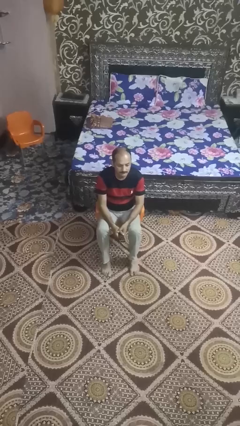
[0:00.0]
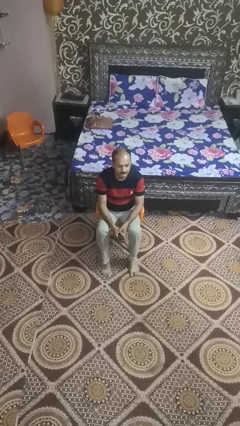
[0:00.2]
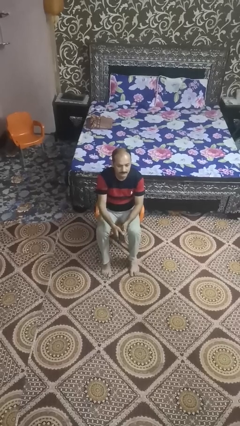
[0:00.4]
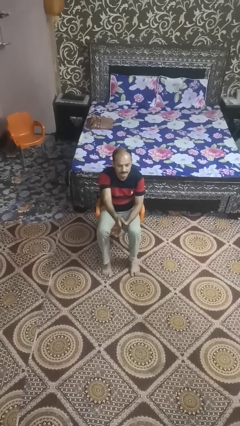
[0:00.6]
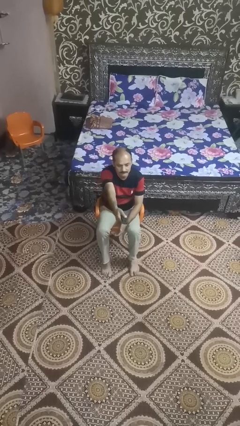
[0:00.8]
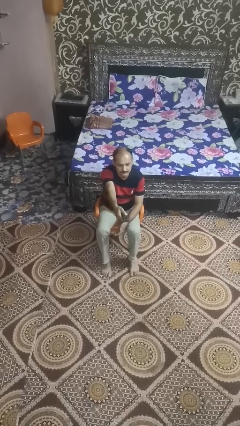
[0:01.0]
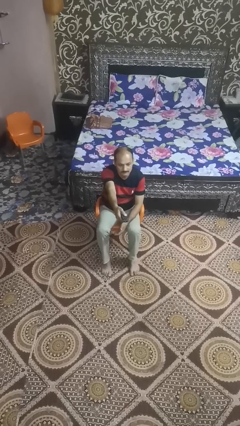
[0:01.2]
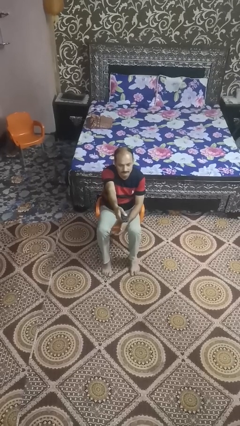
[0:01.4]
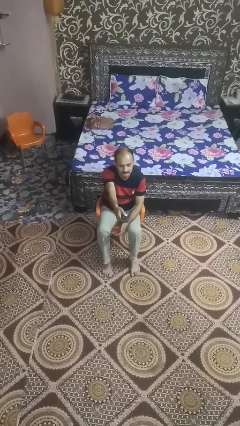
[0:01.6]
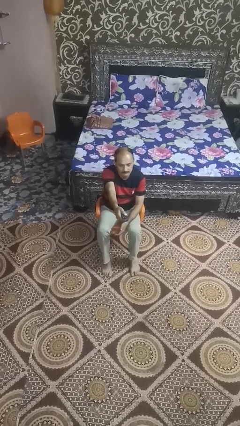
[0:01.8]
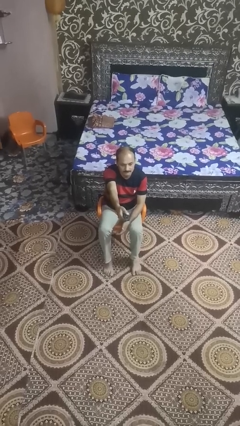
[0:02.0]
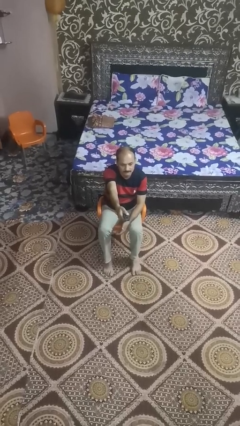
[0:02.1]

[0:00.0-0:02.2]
person uses television remote

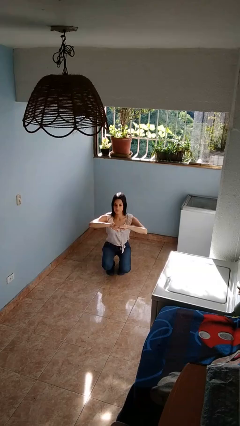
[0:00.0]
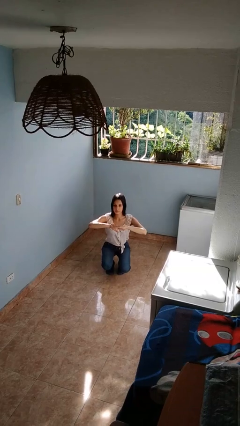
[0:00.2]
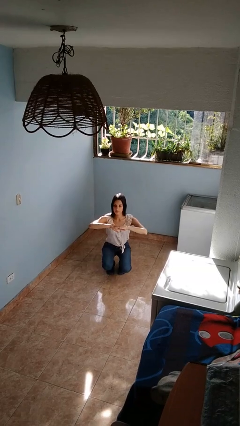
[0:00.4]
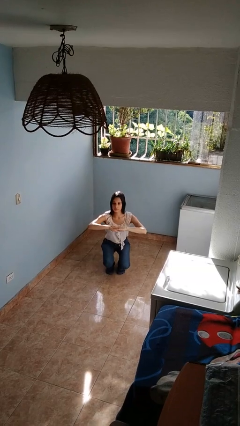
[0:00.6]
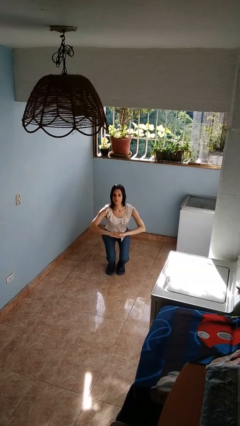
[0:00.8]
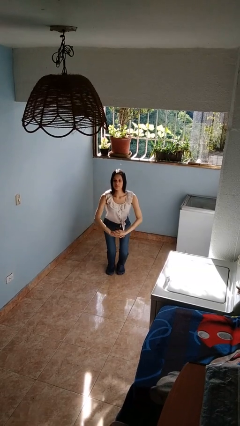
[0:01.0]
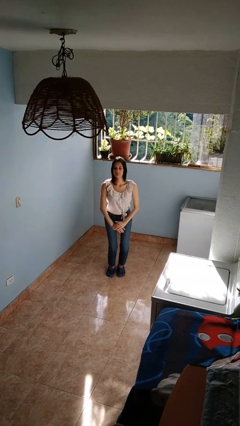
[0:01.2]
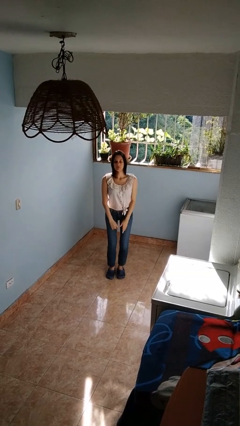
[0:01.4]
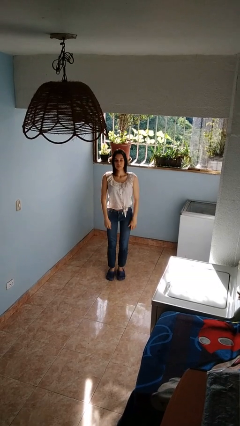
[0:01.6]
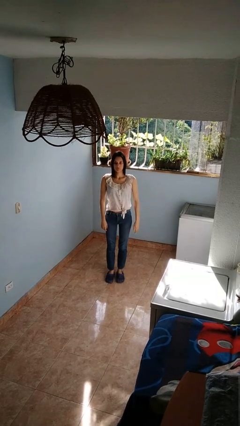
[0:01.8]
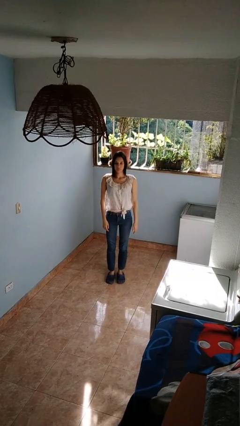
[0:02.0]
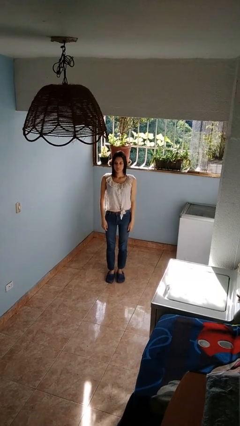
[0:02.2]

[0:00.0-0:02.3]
person stands up

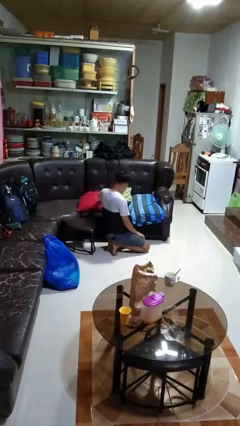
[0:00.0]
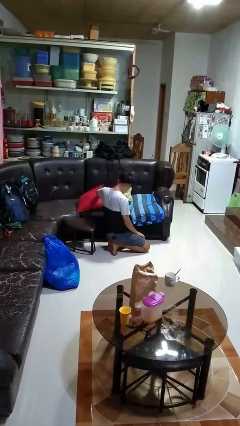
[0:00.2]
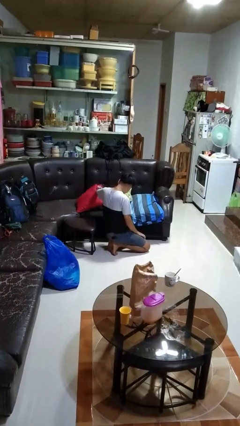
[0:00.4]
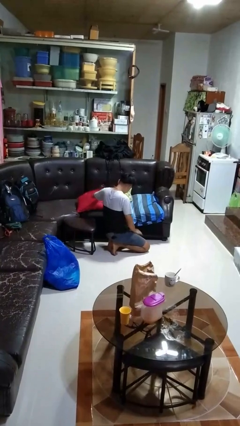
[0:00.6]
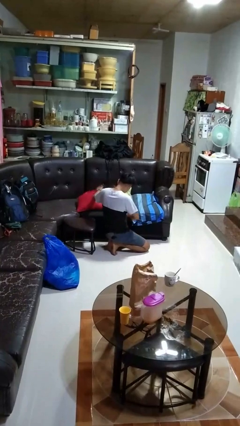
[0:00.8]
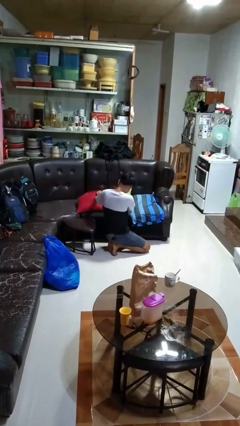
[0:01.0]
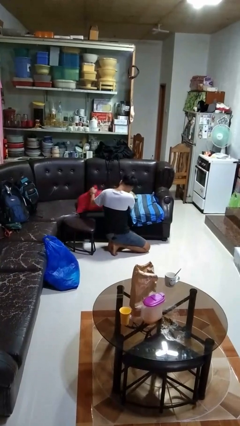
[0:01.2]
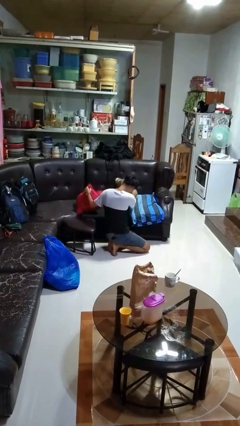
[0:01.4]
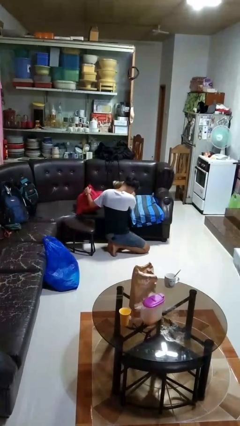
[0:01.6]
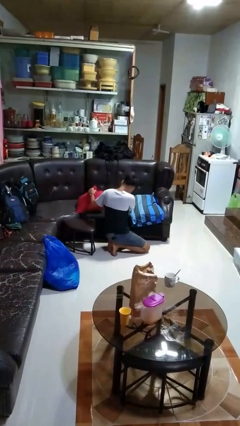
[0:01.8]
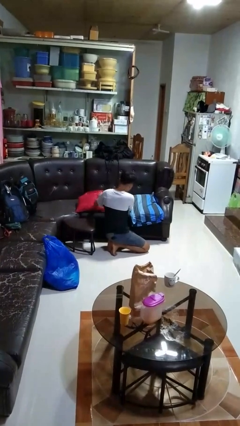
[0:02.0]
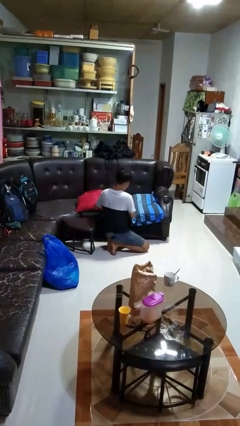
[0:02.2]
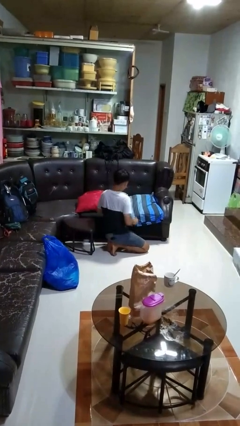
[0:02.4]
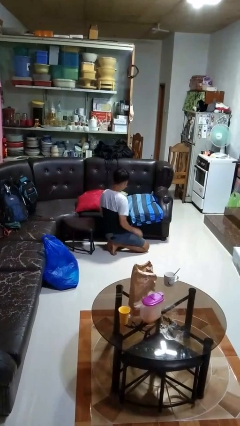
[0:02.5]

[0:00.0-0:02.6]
person searches in couch

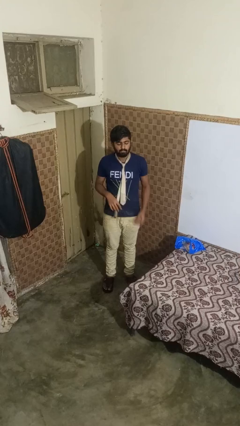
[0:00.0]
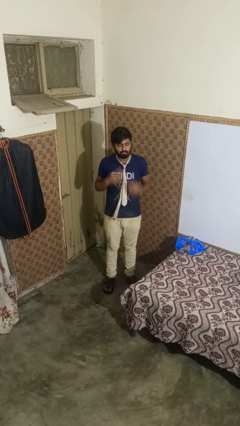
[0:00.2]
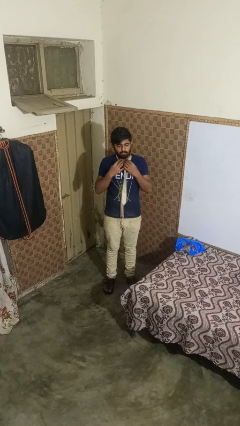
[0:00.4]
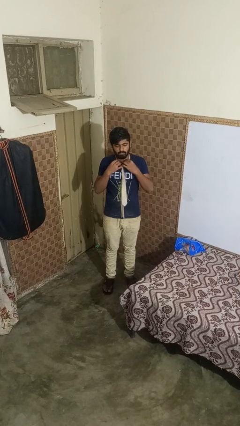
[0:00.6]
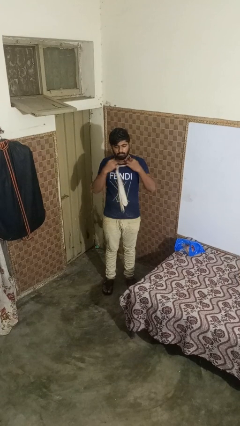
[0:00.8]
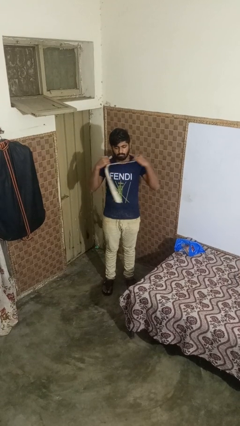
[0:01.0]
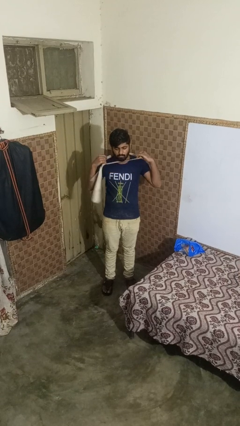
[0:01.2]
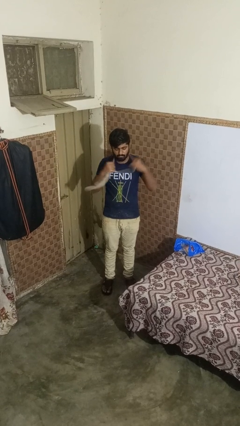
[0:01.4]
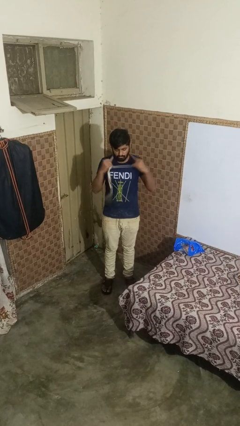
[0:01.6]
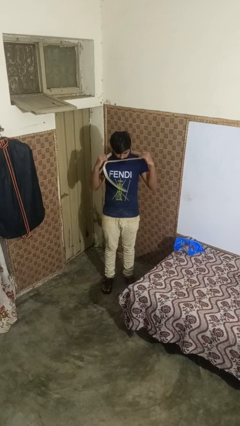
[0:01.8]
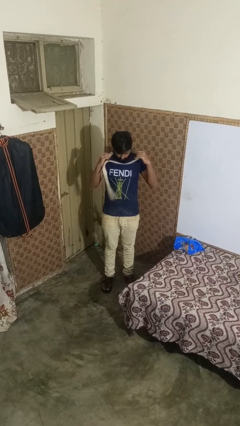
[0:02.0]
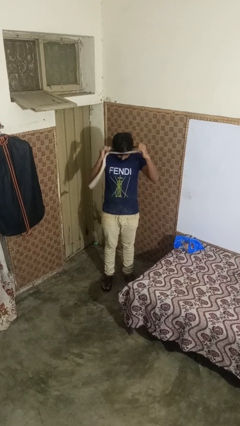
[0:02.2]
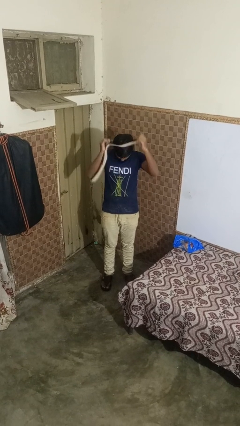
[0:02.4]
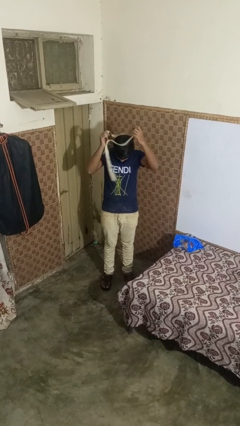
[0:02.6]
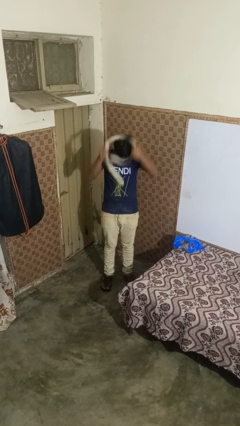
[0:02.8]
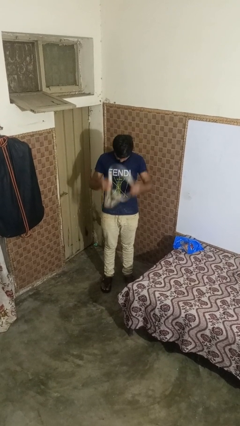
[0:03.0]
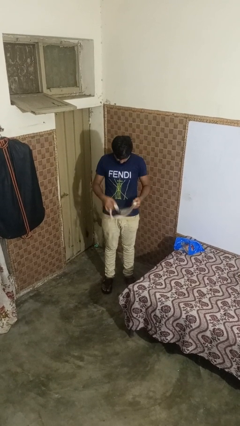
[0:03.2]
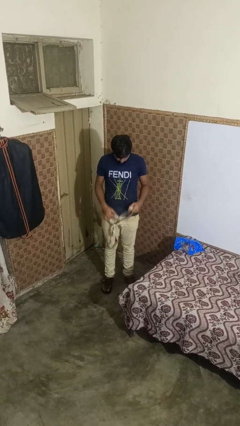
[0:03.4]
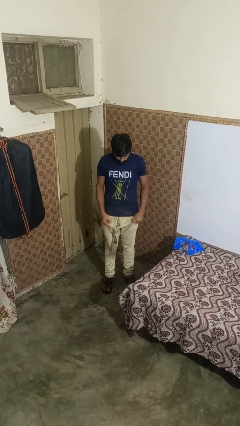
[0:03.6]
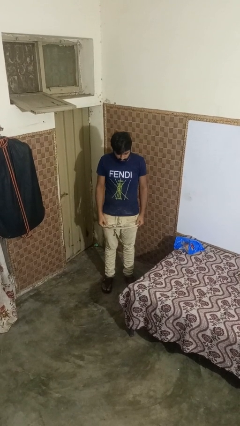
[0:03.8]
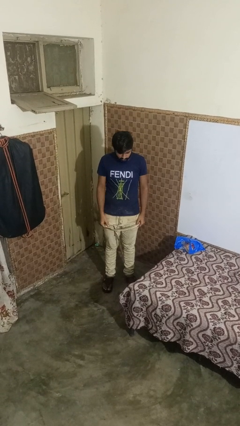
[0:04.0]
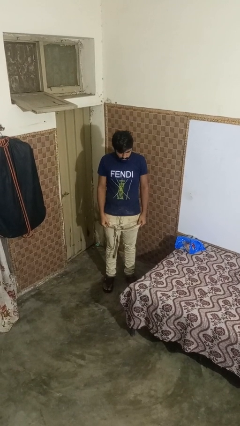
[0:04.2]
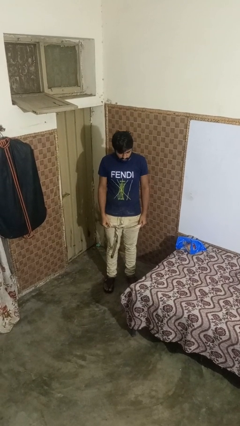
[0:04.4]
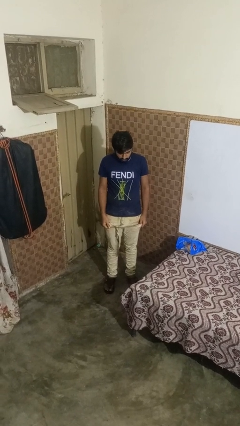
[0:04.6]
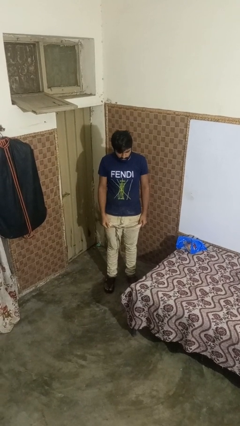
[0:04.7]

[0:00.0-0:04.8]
person takes off necktie

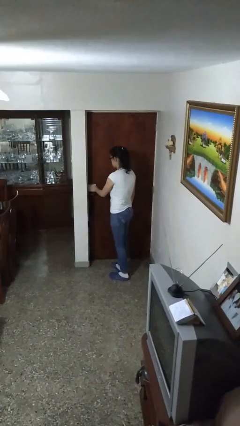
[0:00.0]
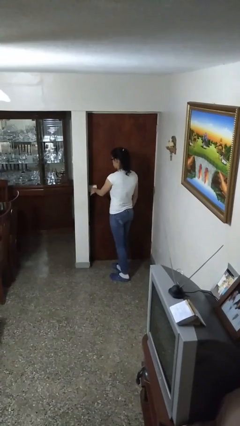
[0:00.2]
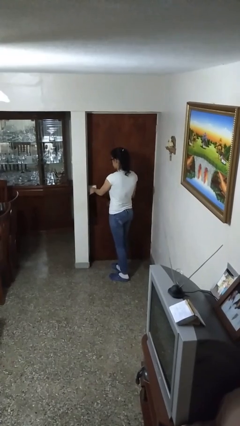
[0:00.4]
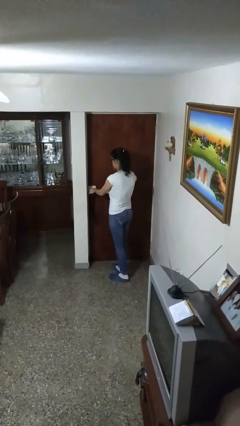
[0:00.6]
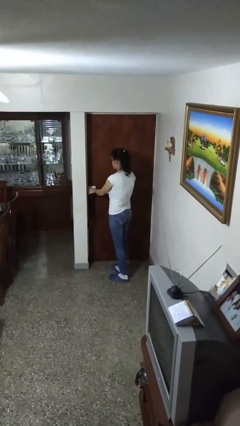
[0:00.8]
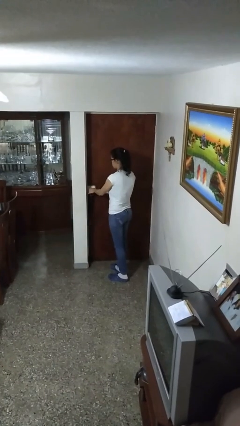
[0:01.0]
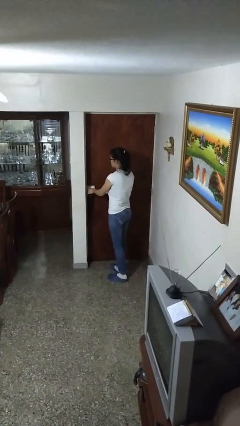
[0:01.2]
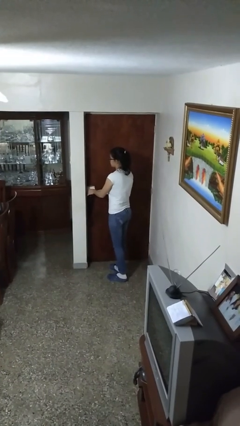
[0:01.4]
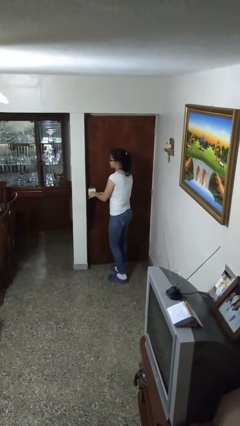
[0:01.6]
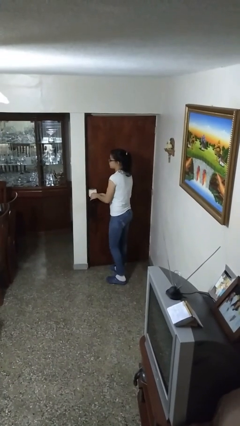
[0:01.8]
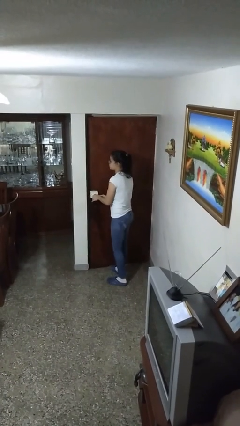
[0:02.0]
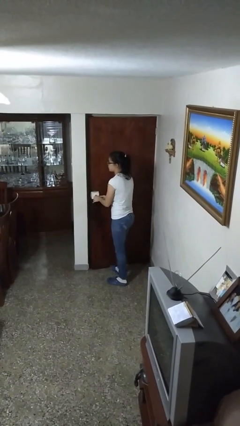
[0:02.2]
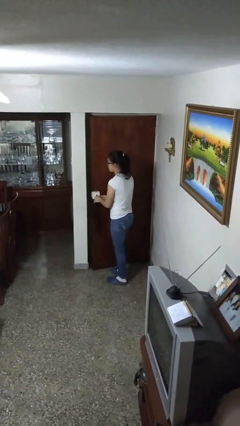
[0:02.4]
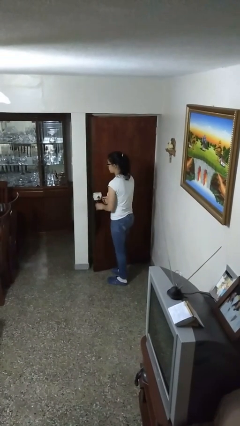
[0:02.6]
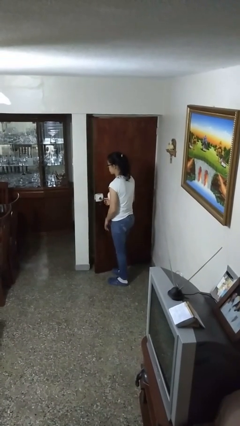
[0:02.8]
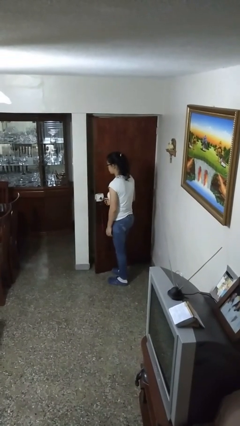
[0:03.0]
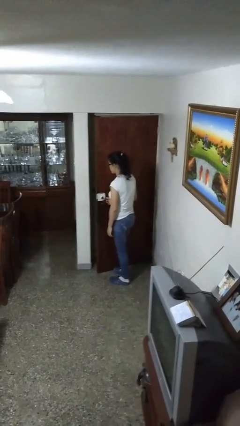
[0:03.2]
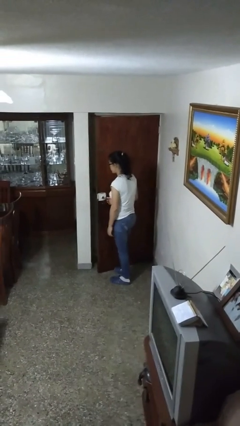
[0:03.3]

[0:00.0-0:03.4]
person opens facility door

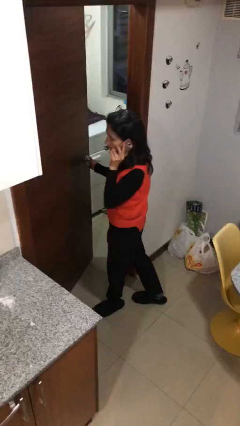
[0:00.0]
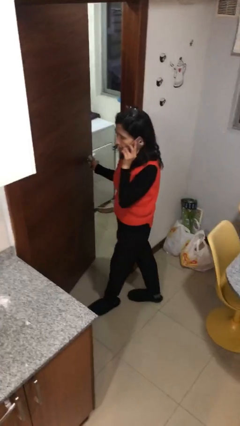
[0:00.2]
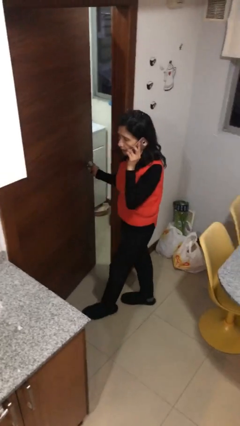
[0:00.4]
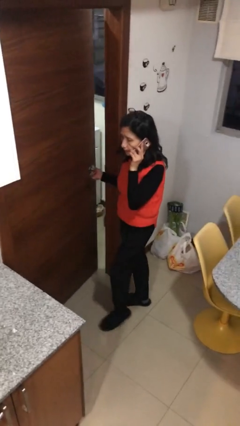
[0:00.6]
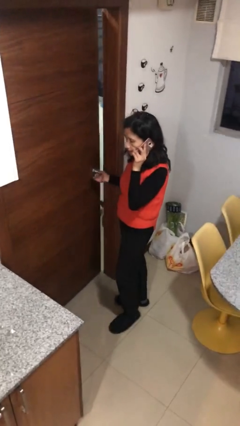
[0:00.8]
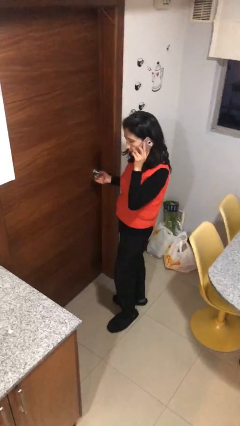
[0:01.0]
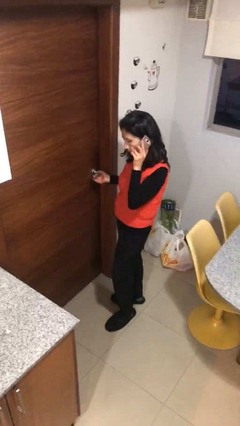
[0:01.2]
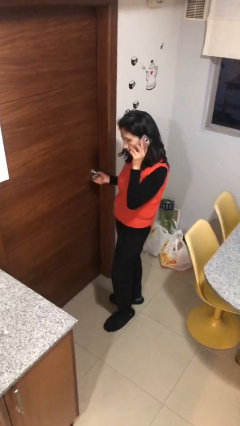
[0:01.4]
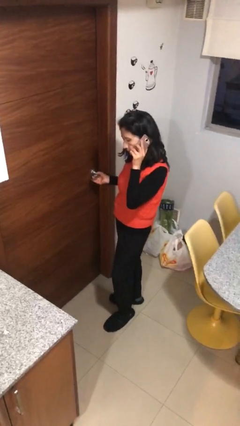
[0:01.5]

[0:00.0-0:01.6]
person closes facility door

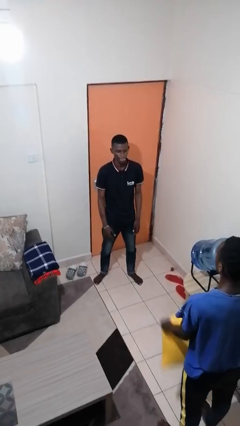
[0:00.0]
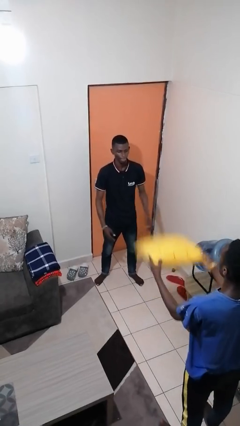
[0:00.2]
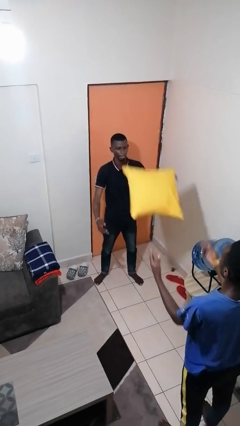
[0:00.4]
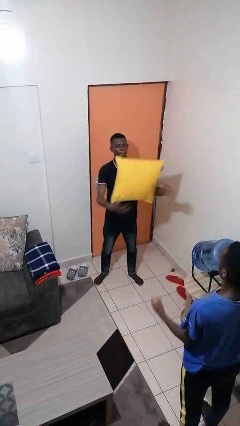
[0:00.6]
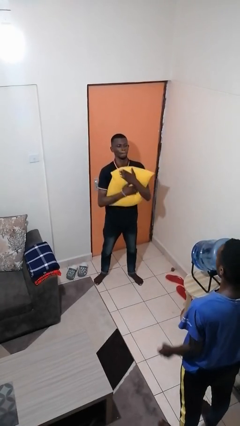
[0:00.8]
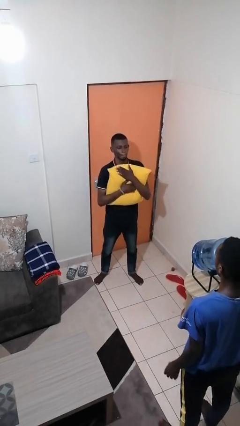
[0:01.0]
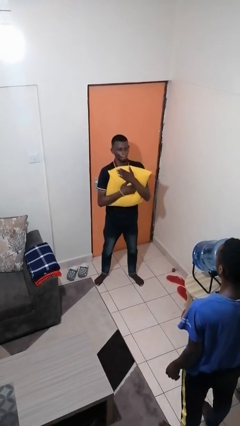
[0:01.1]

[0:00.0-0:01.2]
person catches object from person
